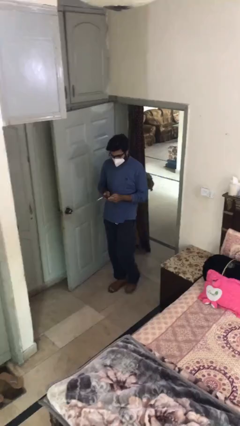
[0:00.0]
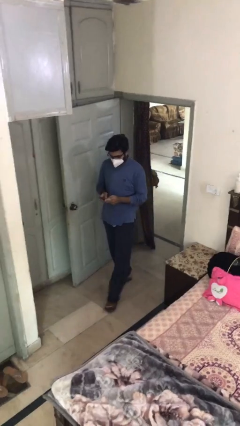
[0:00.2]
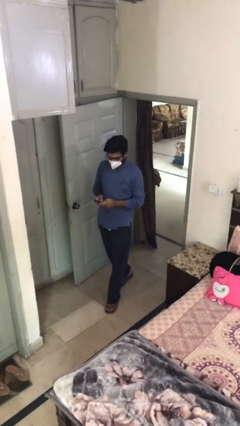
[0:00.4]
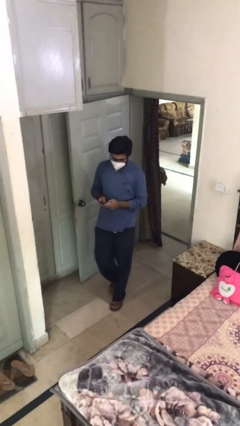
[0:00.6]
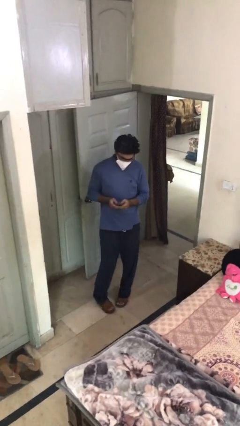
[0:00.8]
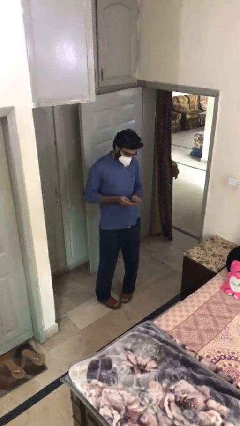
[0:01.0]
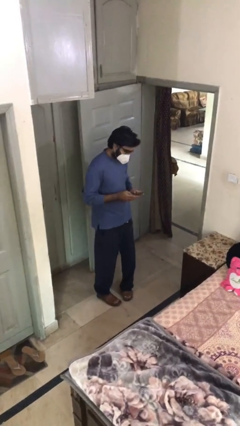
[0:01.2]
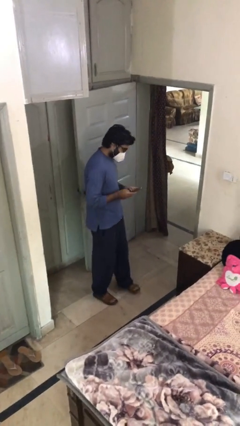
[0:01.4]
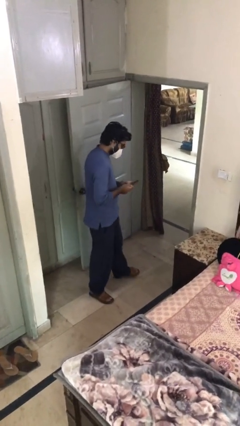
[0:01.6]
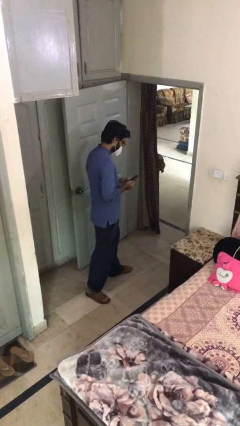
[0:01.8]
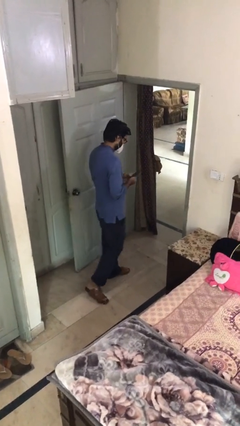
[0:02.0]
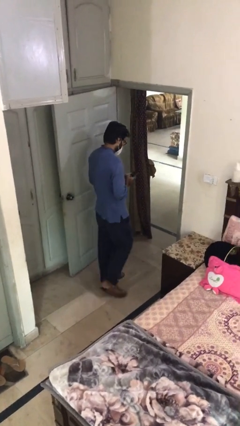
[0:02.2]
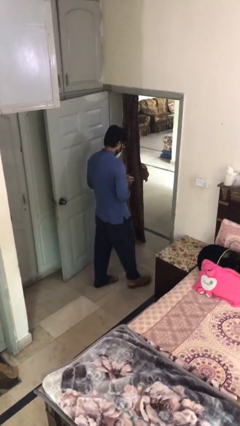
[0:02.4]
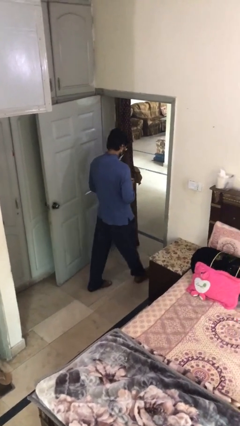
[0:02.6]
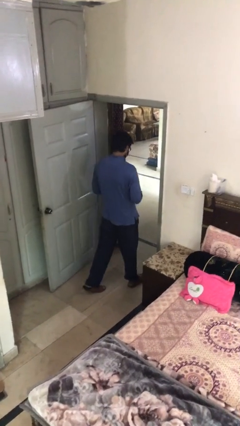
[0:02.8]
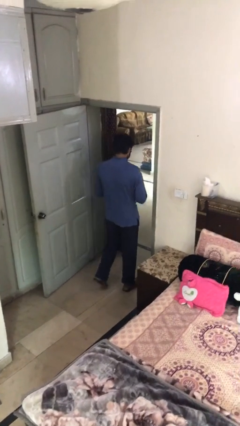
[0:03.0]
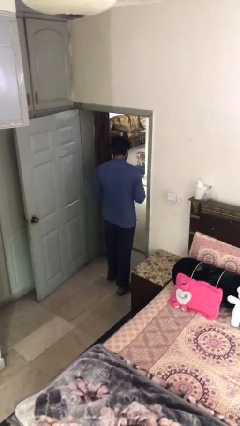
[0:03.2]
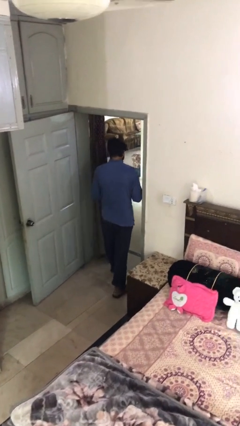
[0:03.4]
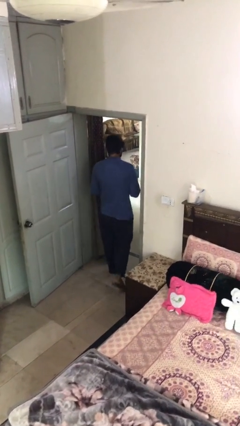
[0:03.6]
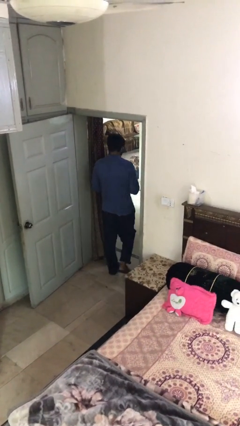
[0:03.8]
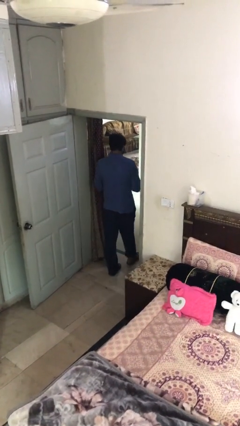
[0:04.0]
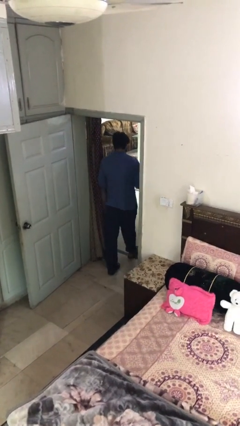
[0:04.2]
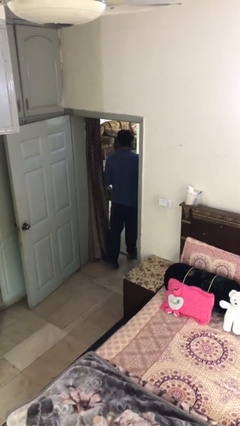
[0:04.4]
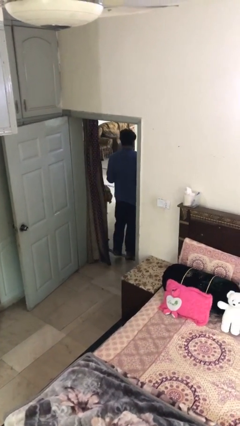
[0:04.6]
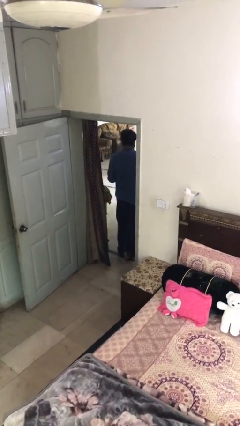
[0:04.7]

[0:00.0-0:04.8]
person exits scene through structure

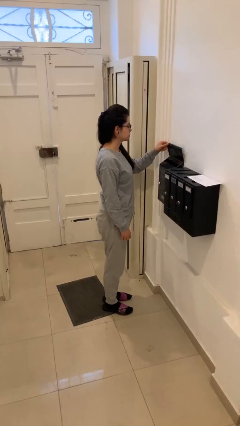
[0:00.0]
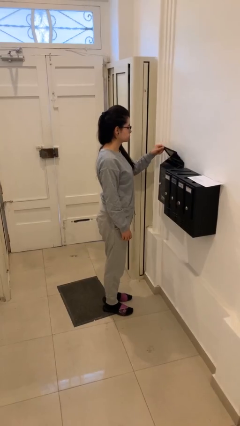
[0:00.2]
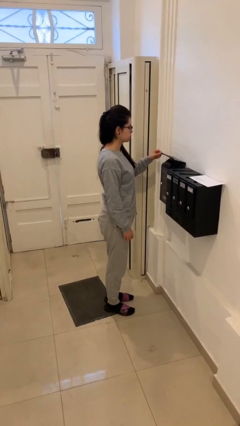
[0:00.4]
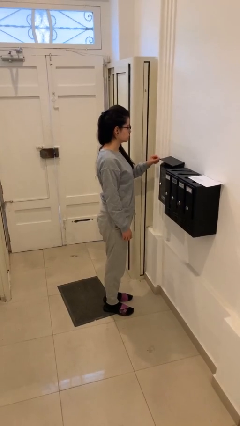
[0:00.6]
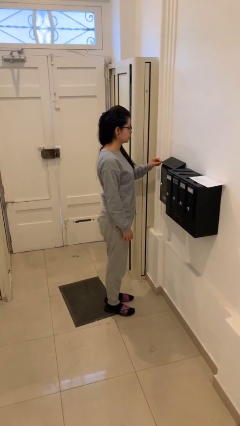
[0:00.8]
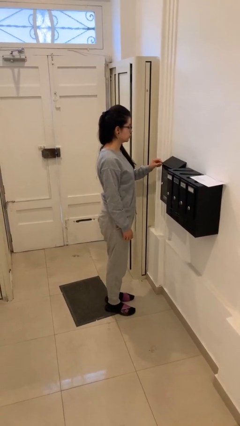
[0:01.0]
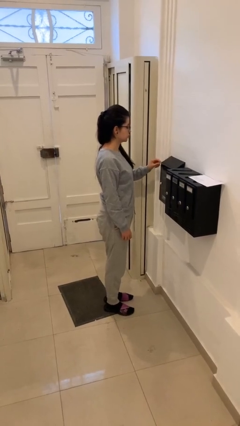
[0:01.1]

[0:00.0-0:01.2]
person closes mailbox

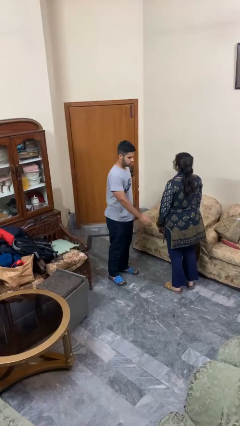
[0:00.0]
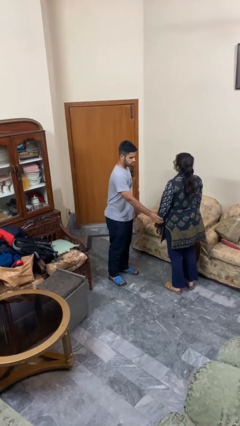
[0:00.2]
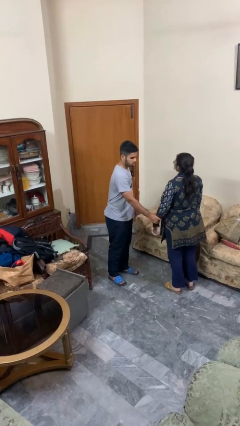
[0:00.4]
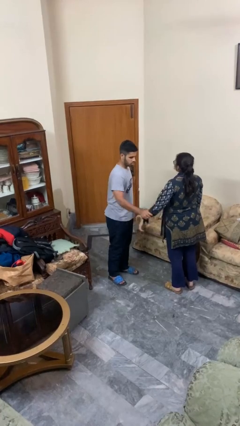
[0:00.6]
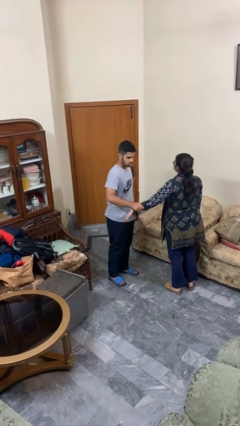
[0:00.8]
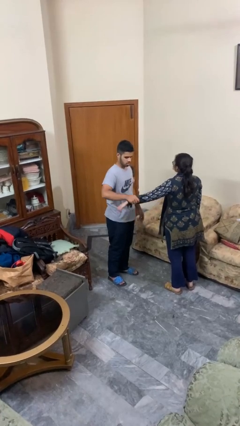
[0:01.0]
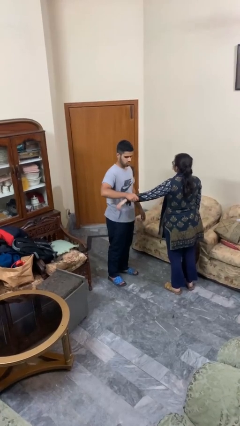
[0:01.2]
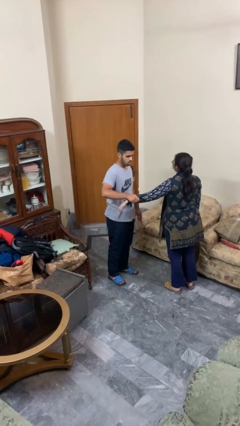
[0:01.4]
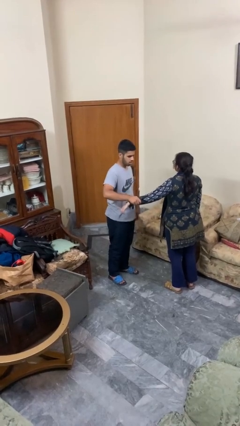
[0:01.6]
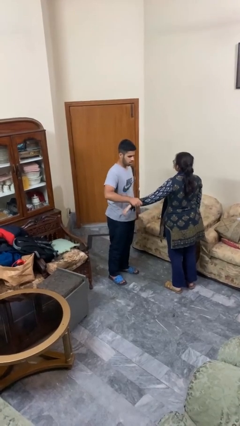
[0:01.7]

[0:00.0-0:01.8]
person grabs person by forearm

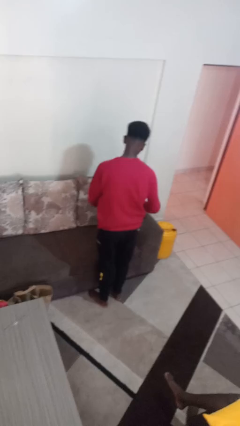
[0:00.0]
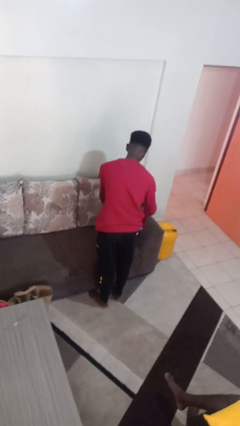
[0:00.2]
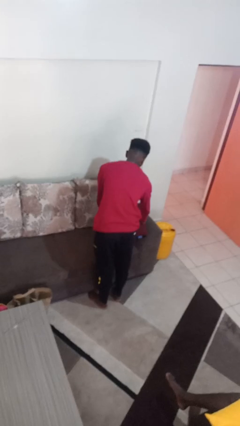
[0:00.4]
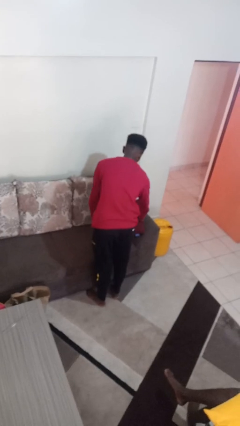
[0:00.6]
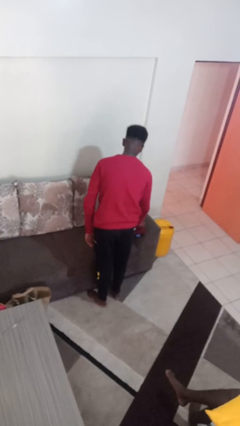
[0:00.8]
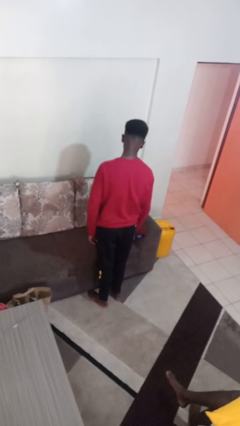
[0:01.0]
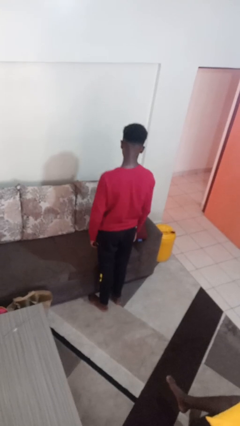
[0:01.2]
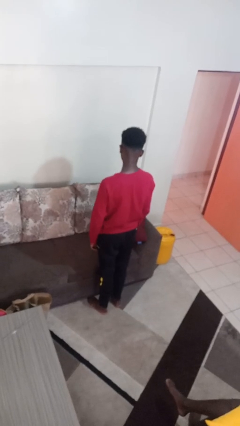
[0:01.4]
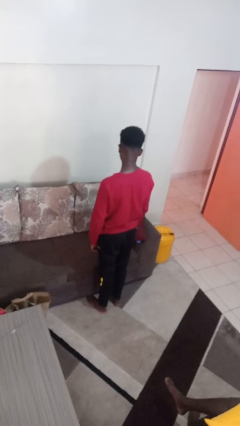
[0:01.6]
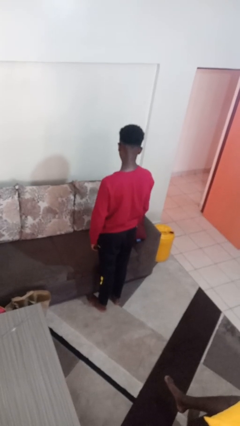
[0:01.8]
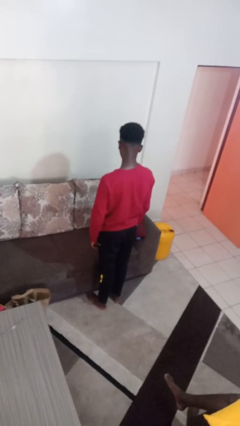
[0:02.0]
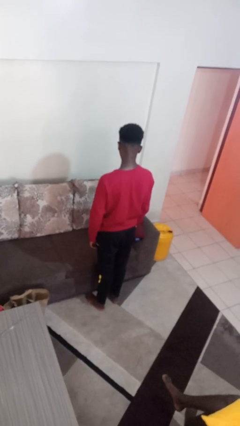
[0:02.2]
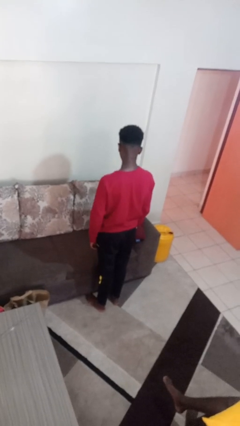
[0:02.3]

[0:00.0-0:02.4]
person puts down object on couch

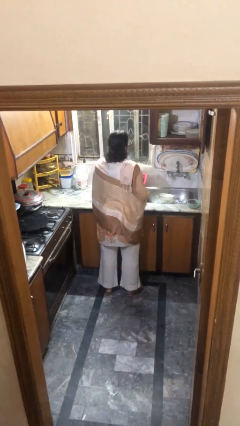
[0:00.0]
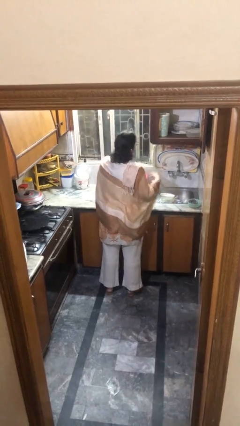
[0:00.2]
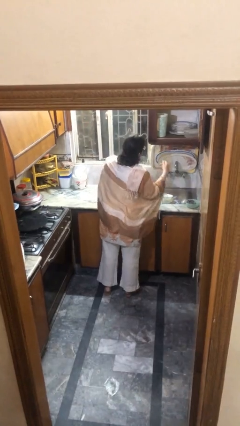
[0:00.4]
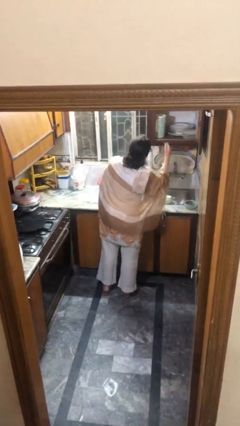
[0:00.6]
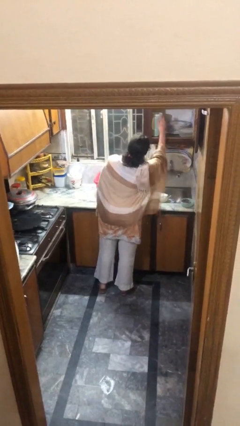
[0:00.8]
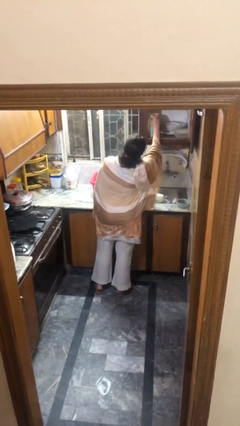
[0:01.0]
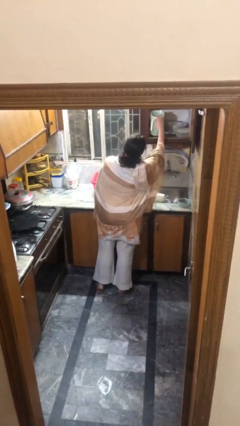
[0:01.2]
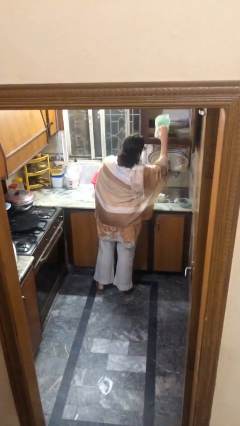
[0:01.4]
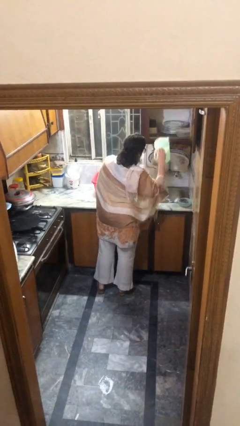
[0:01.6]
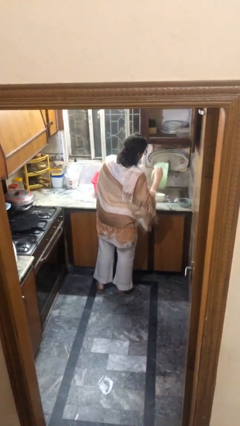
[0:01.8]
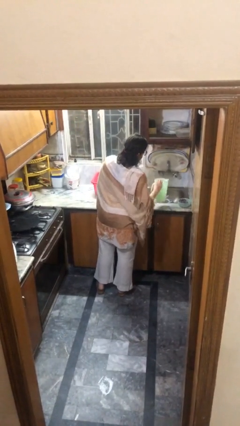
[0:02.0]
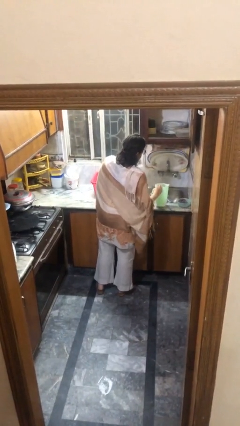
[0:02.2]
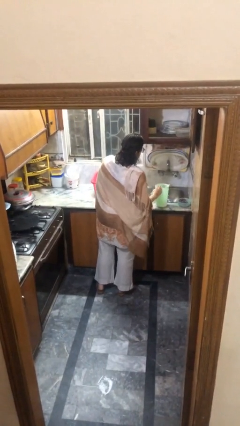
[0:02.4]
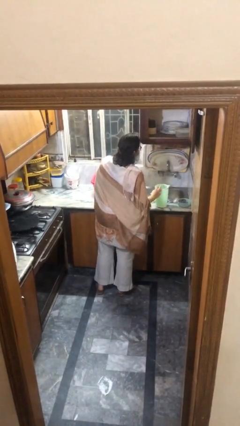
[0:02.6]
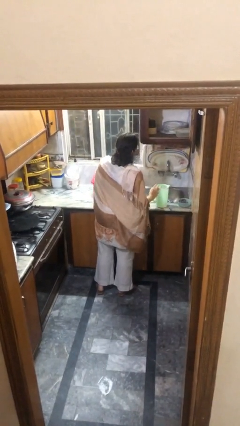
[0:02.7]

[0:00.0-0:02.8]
person takes object from kitchen drawer

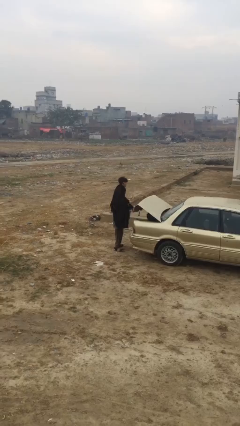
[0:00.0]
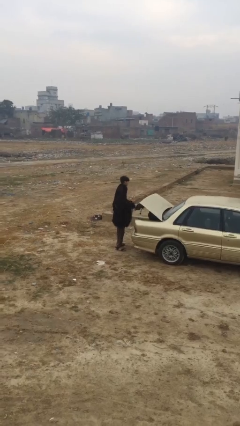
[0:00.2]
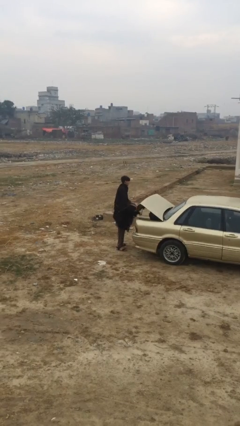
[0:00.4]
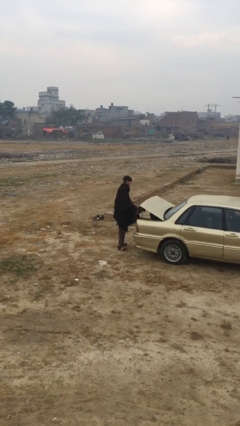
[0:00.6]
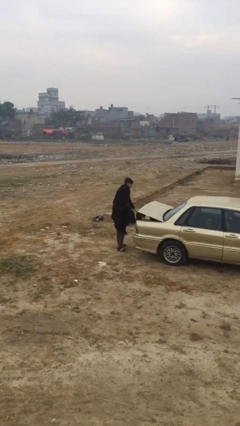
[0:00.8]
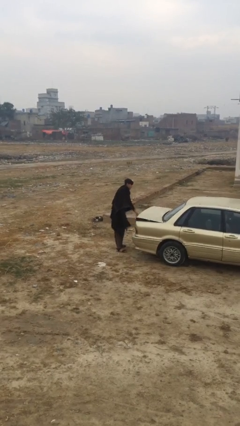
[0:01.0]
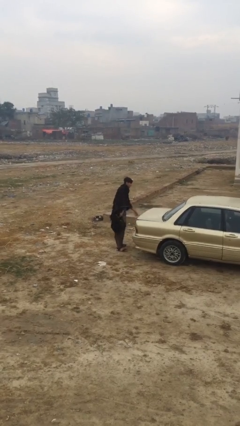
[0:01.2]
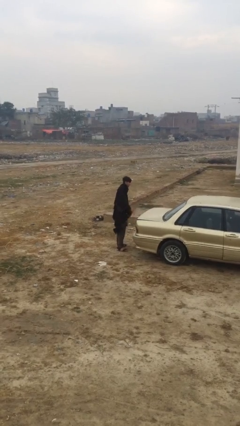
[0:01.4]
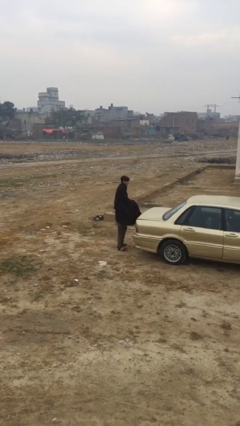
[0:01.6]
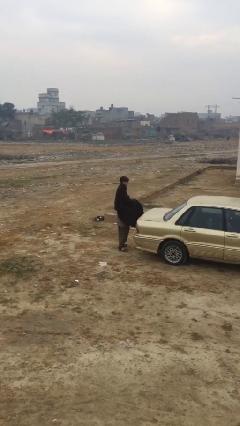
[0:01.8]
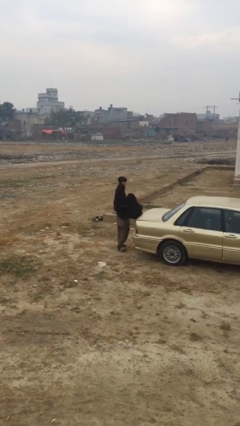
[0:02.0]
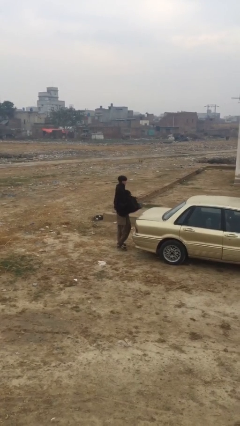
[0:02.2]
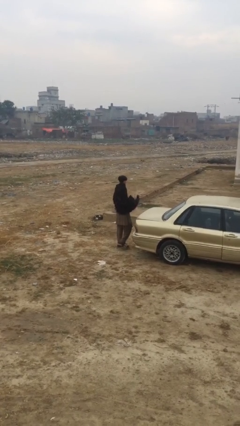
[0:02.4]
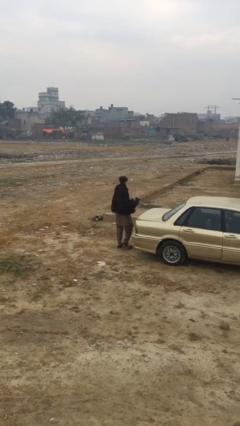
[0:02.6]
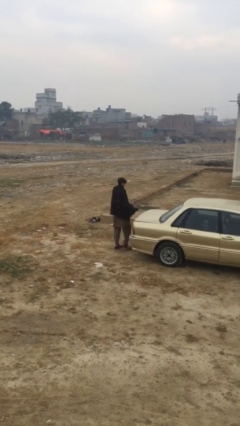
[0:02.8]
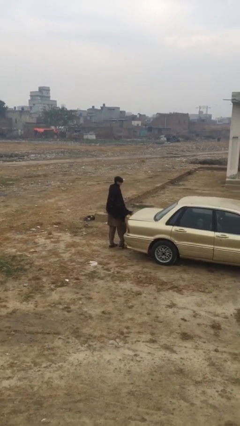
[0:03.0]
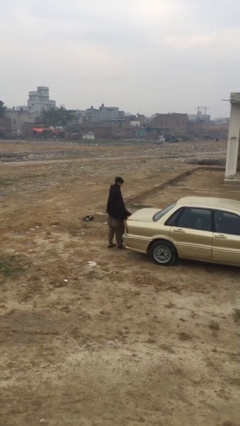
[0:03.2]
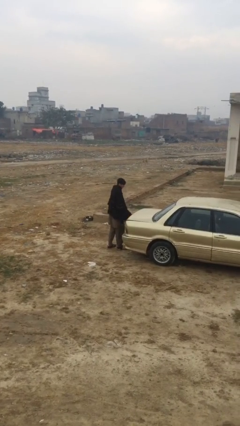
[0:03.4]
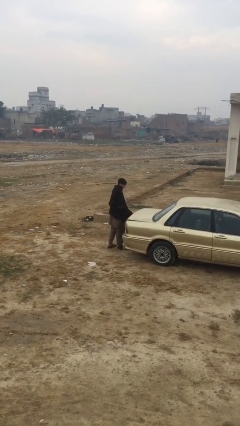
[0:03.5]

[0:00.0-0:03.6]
person closes car trunk

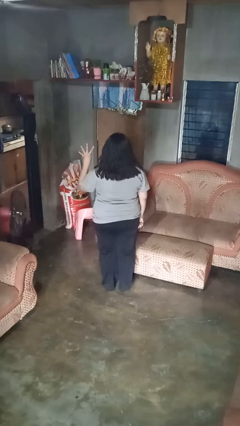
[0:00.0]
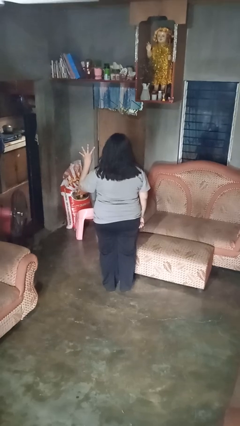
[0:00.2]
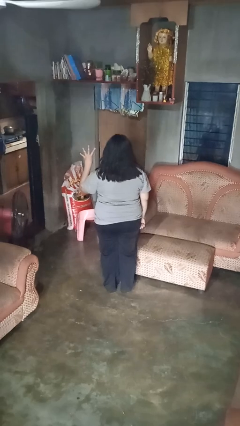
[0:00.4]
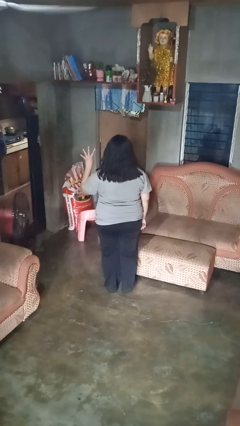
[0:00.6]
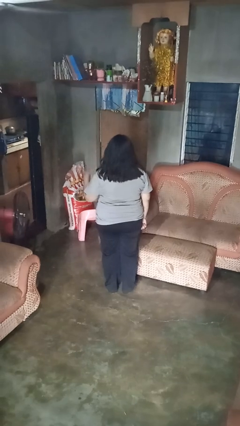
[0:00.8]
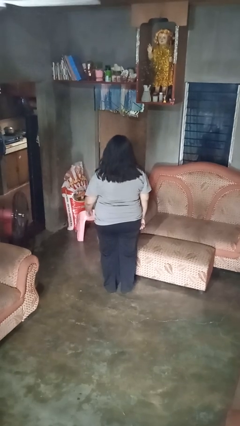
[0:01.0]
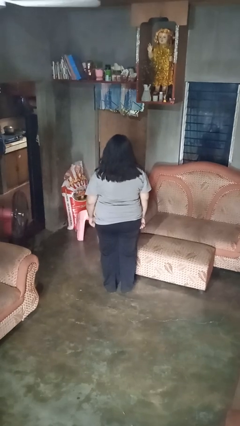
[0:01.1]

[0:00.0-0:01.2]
person gestures number four
